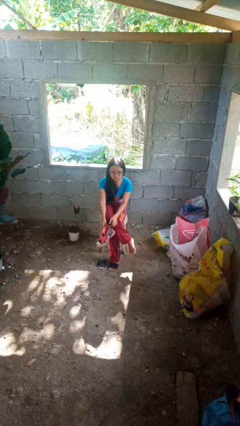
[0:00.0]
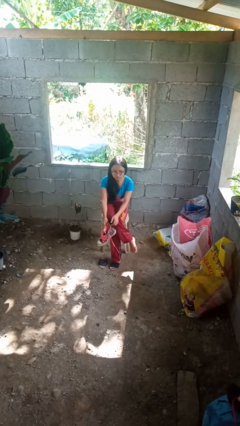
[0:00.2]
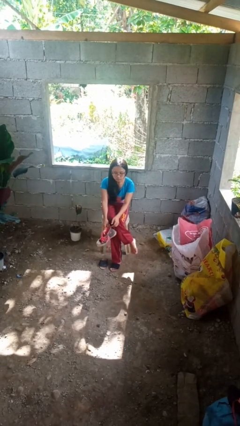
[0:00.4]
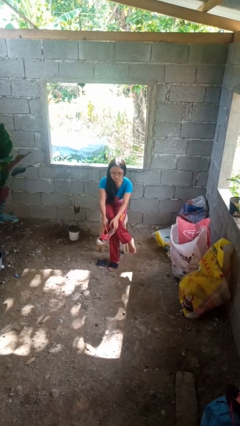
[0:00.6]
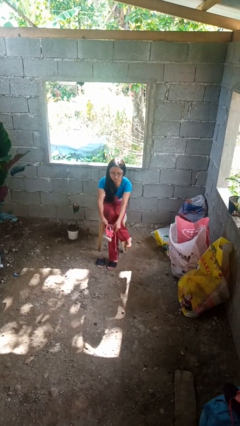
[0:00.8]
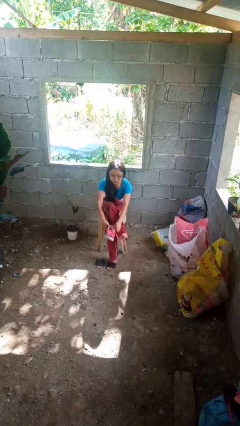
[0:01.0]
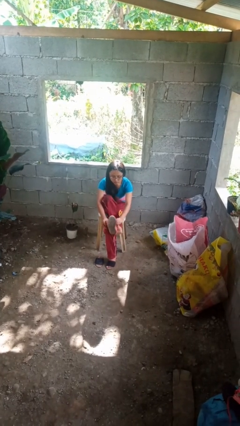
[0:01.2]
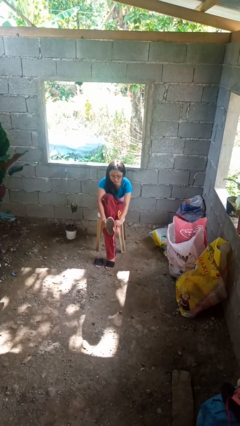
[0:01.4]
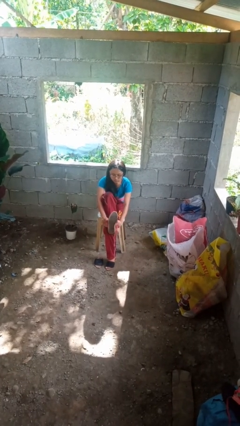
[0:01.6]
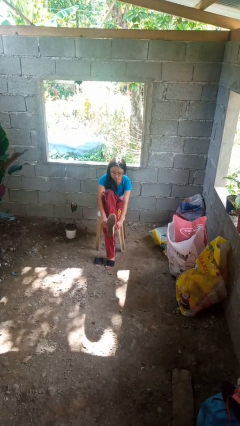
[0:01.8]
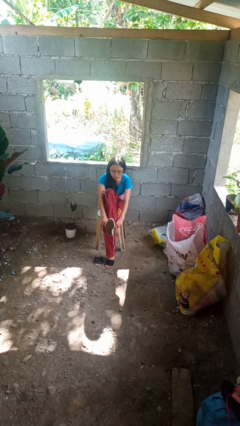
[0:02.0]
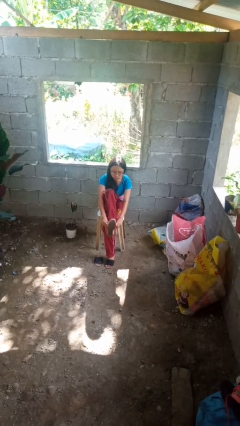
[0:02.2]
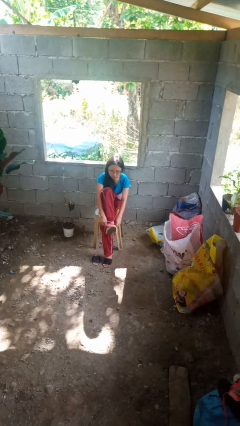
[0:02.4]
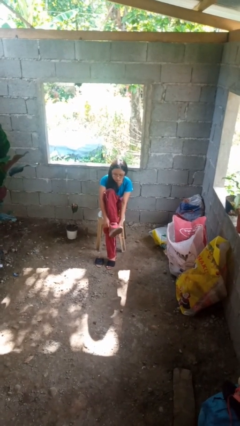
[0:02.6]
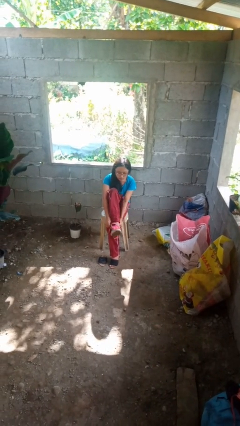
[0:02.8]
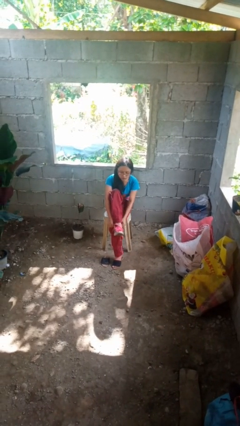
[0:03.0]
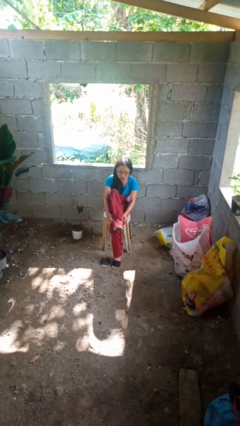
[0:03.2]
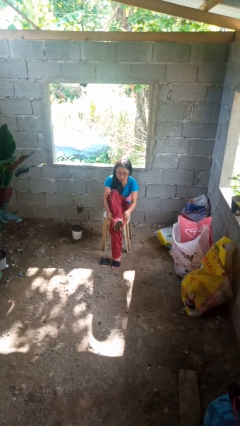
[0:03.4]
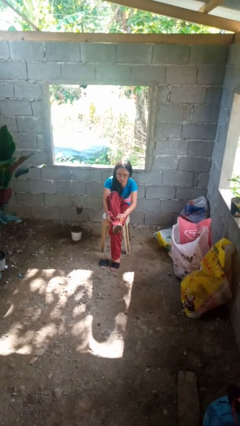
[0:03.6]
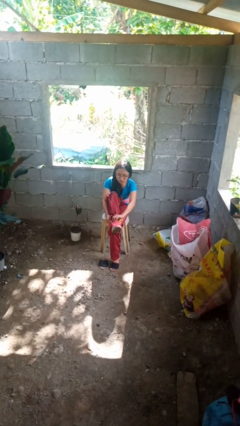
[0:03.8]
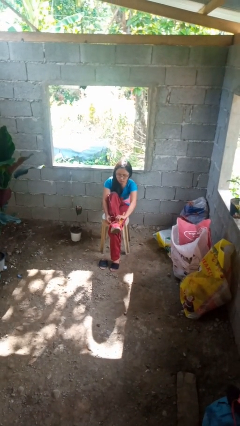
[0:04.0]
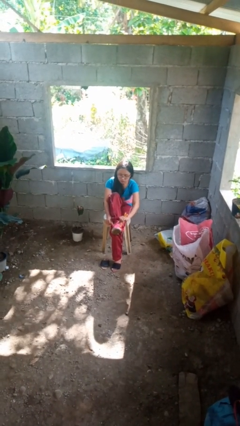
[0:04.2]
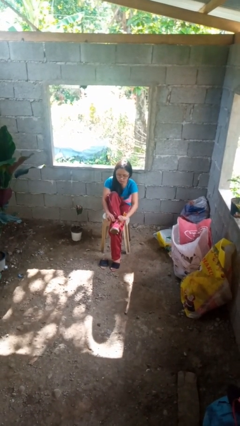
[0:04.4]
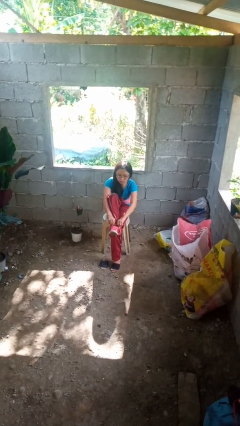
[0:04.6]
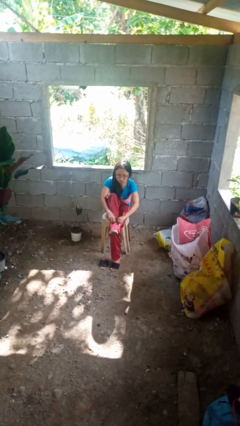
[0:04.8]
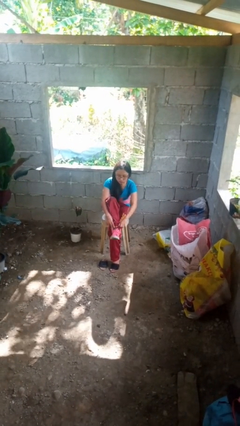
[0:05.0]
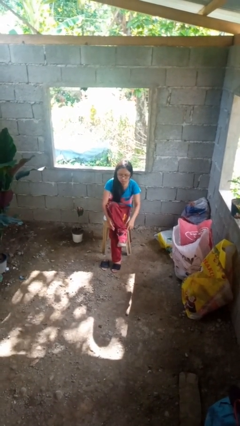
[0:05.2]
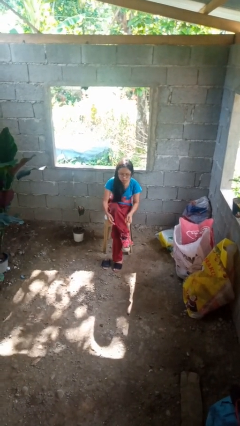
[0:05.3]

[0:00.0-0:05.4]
person puts on shoes

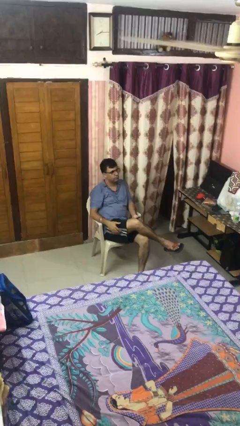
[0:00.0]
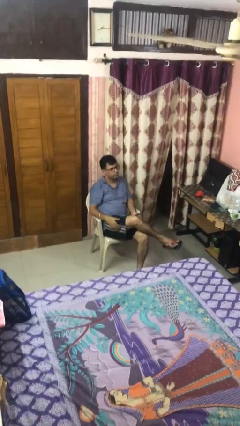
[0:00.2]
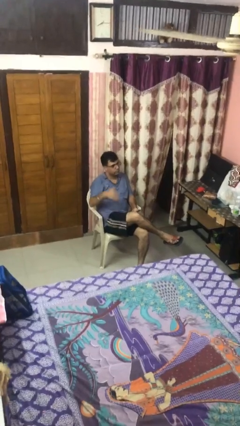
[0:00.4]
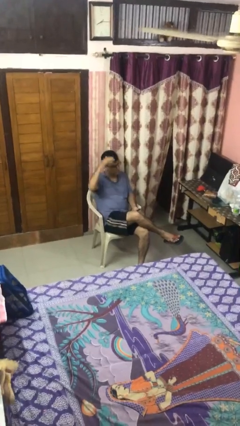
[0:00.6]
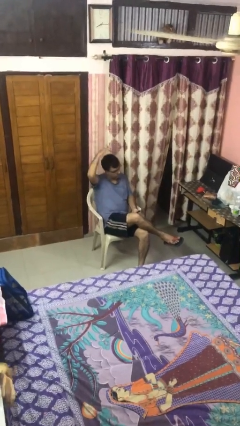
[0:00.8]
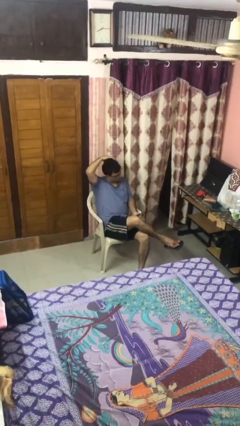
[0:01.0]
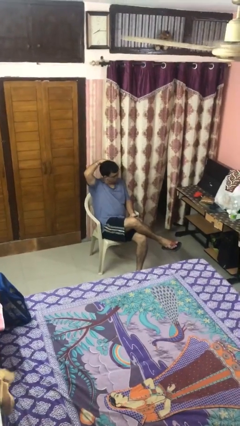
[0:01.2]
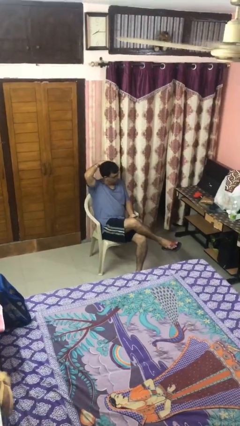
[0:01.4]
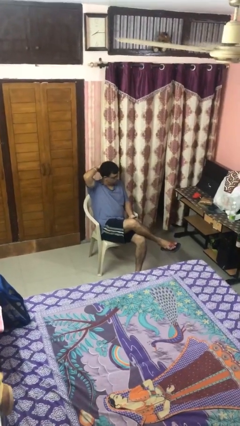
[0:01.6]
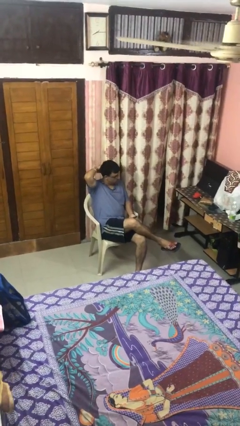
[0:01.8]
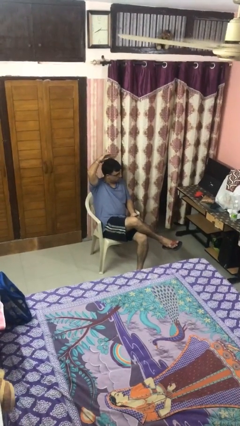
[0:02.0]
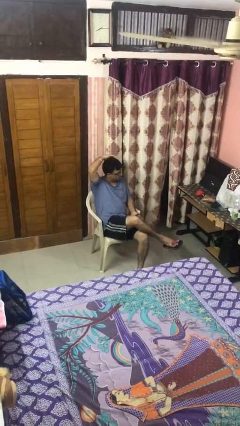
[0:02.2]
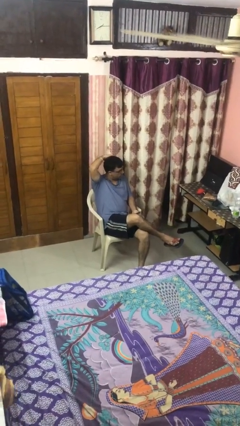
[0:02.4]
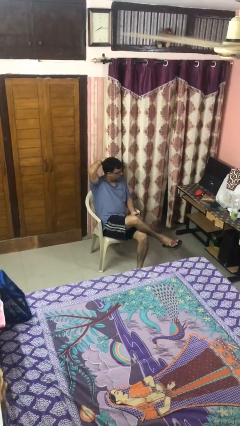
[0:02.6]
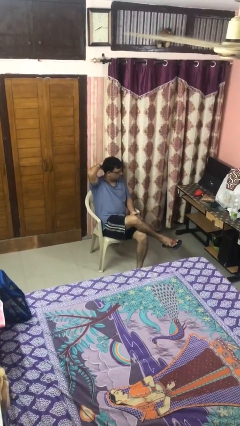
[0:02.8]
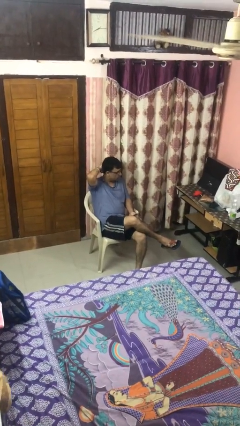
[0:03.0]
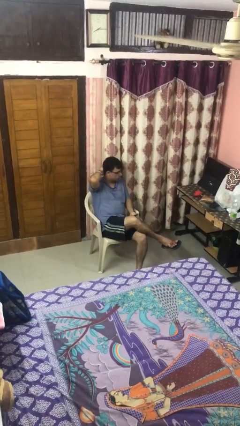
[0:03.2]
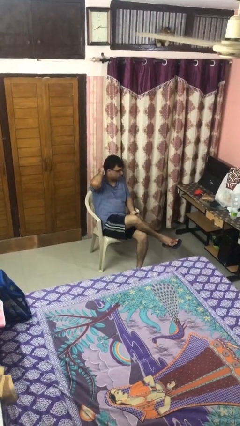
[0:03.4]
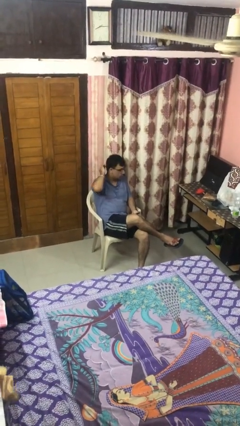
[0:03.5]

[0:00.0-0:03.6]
person strokes hair

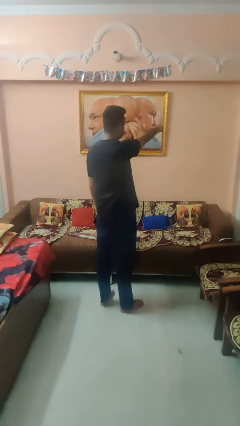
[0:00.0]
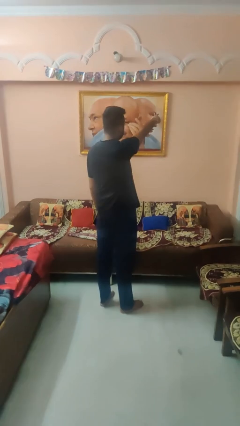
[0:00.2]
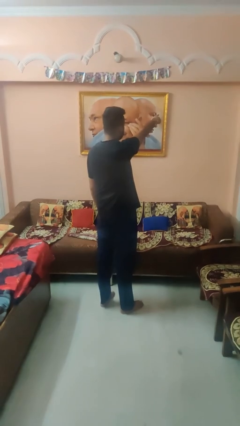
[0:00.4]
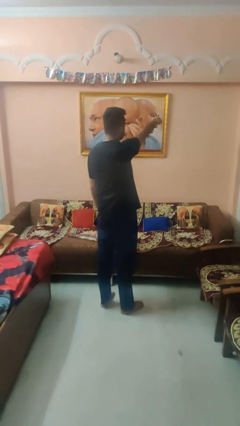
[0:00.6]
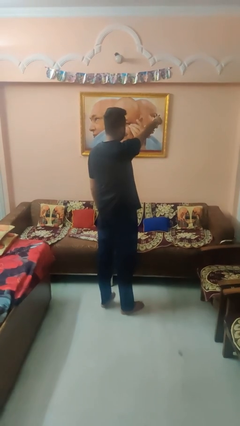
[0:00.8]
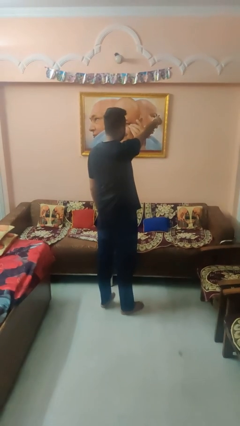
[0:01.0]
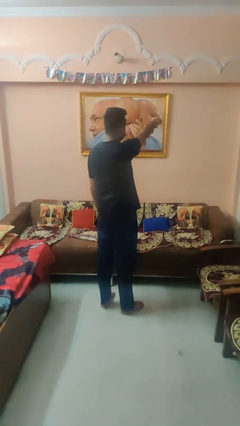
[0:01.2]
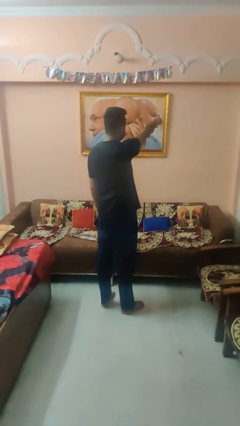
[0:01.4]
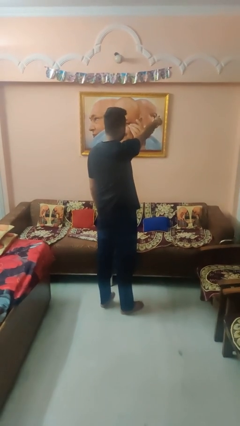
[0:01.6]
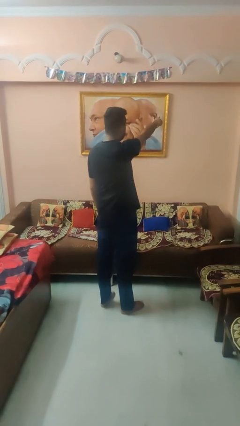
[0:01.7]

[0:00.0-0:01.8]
person points at person

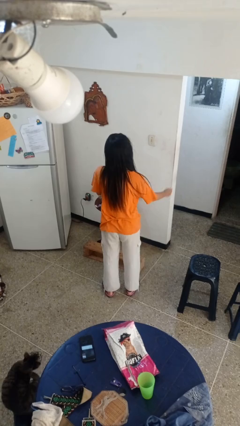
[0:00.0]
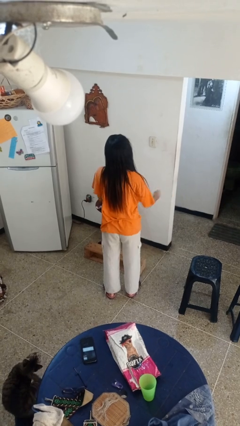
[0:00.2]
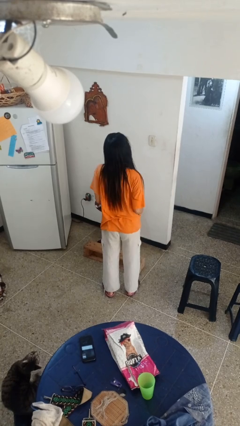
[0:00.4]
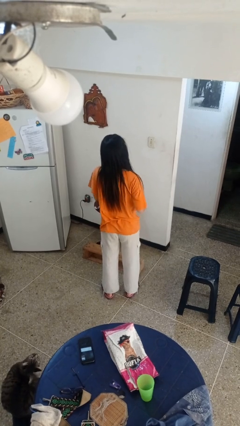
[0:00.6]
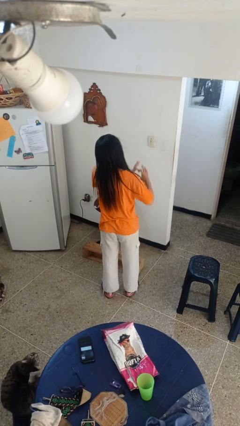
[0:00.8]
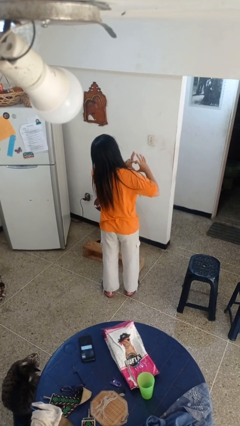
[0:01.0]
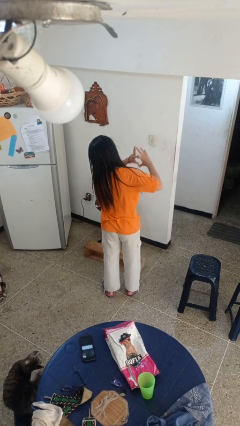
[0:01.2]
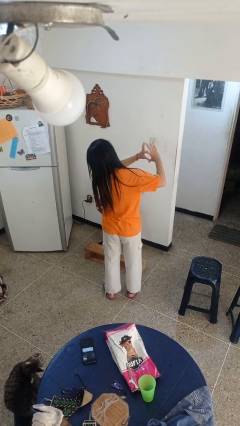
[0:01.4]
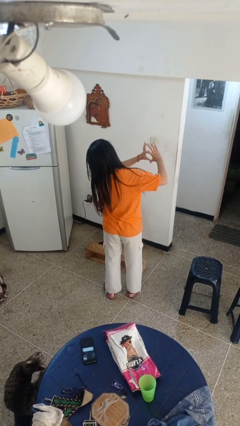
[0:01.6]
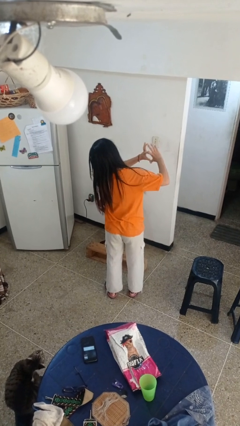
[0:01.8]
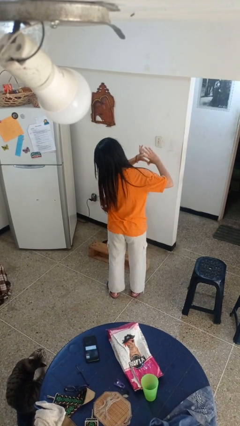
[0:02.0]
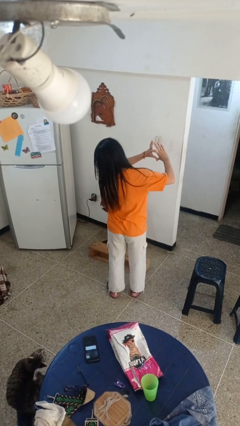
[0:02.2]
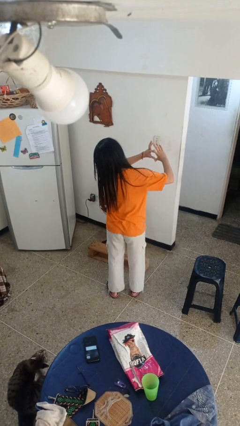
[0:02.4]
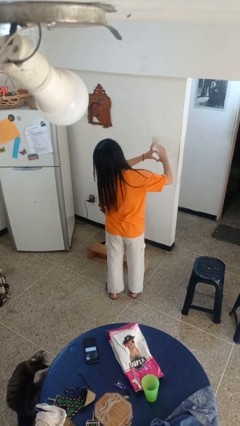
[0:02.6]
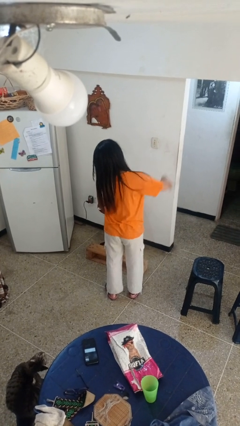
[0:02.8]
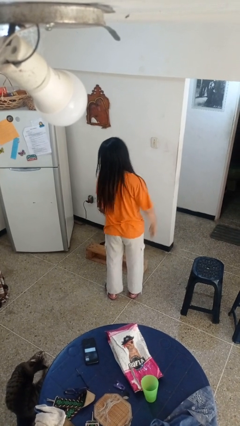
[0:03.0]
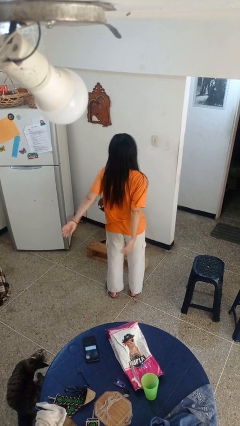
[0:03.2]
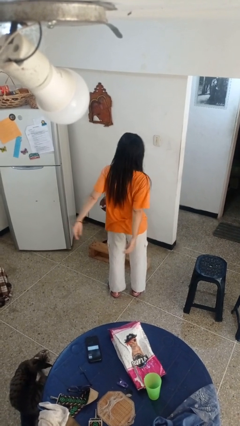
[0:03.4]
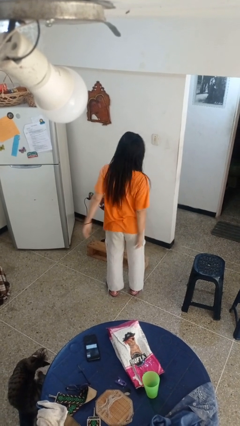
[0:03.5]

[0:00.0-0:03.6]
person gestures heart

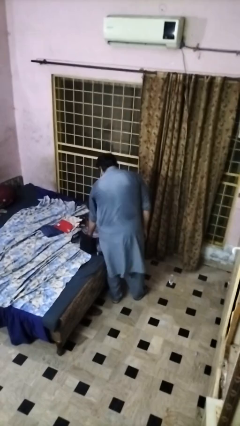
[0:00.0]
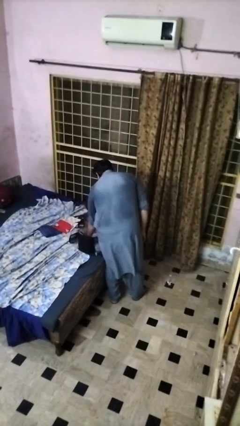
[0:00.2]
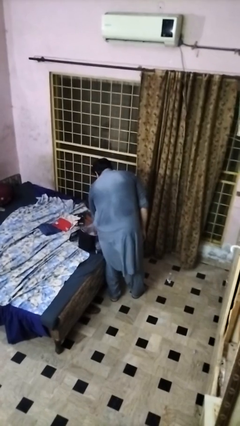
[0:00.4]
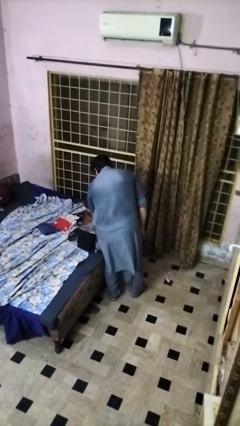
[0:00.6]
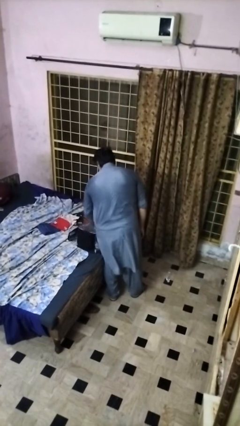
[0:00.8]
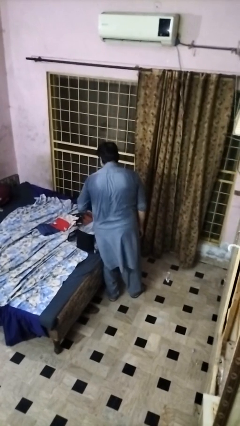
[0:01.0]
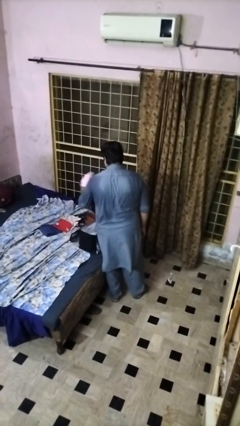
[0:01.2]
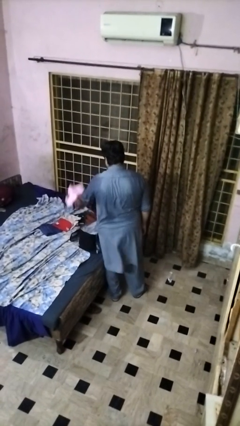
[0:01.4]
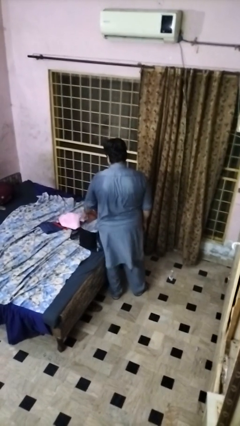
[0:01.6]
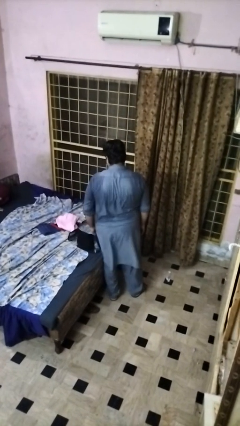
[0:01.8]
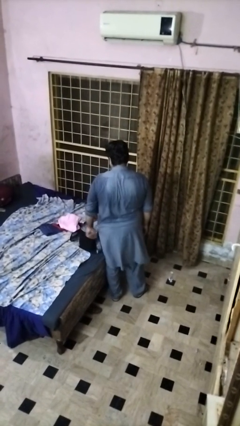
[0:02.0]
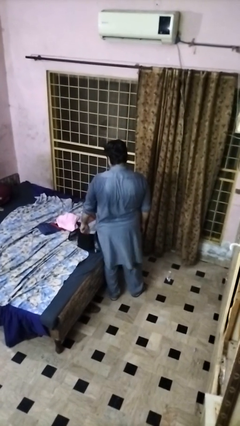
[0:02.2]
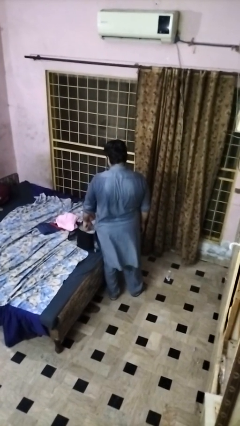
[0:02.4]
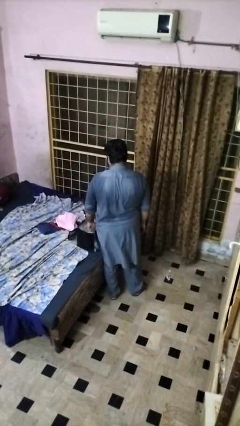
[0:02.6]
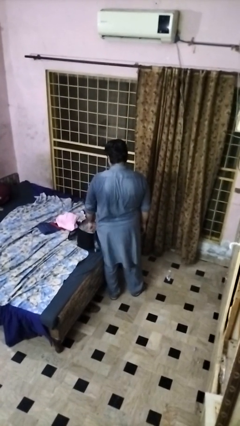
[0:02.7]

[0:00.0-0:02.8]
person unloads clothes from suitcase

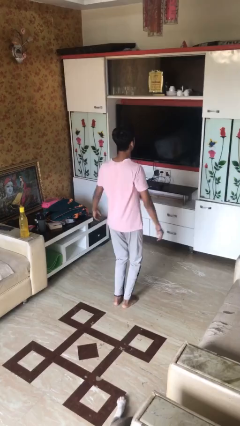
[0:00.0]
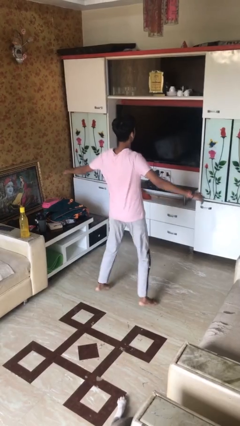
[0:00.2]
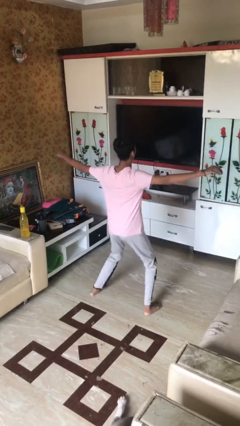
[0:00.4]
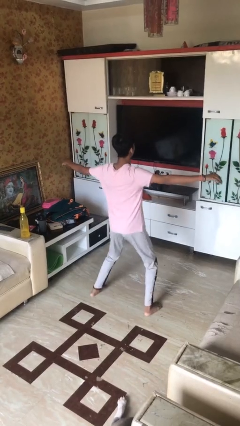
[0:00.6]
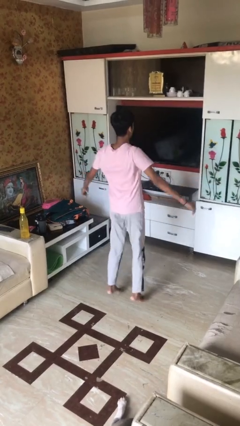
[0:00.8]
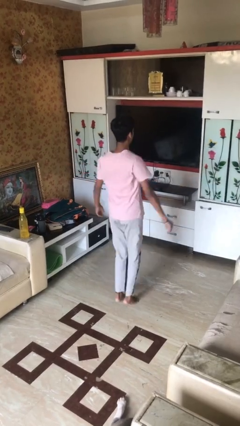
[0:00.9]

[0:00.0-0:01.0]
person exercises with jumping jacks
